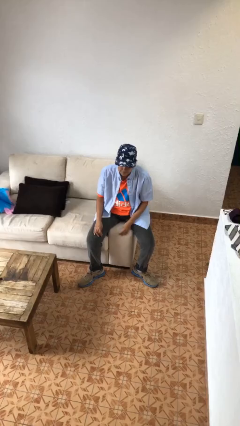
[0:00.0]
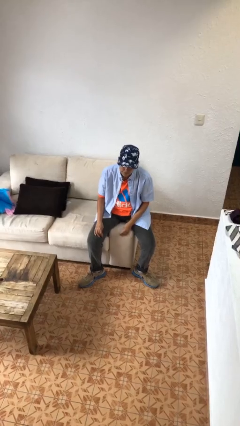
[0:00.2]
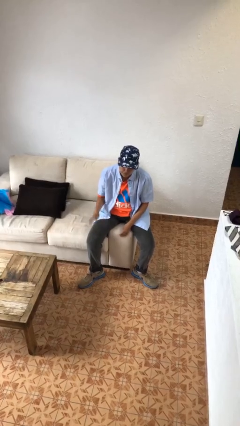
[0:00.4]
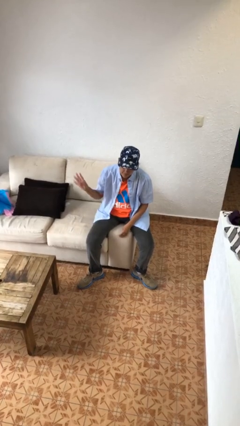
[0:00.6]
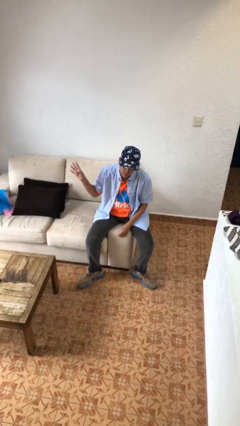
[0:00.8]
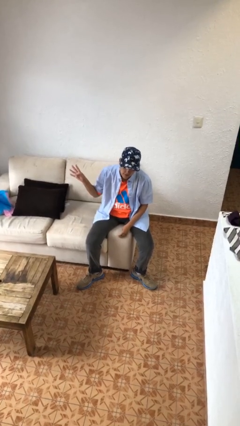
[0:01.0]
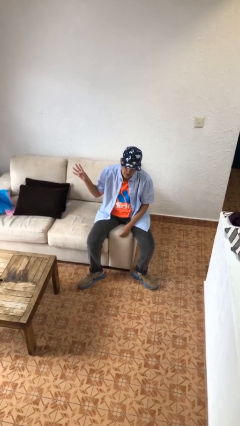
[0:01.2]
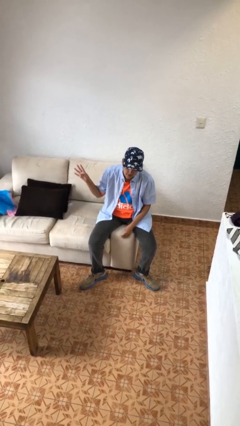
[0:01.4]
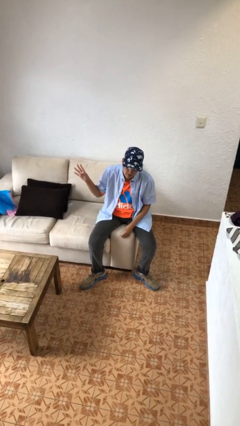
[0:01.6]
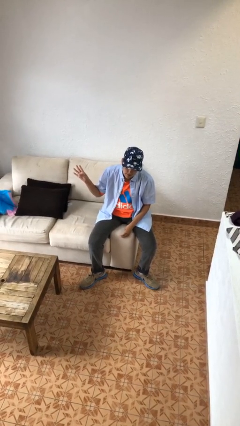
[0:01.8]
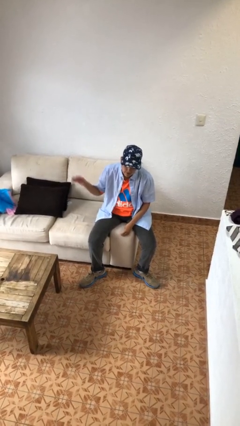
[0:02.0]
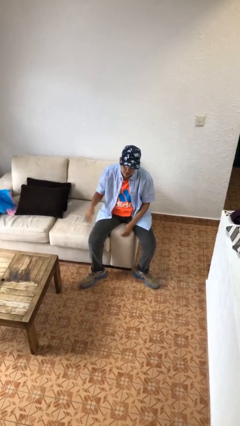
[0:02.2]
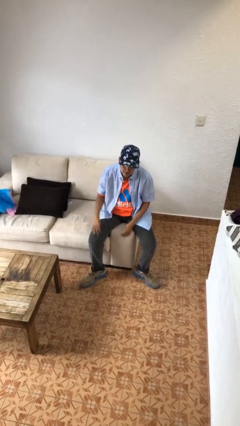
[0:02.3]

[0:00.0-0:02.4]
person gestures number four

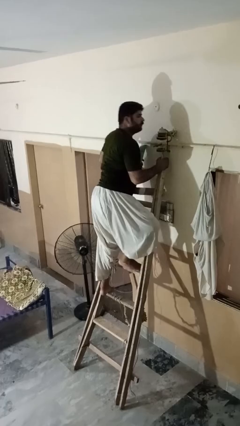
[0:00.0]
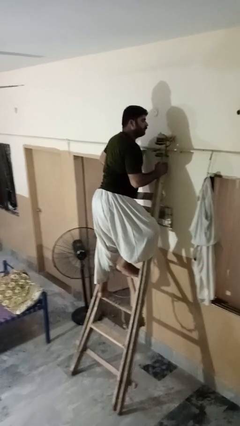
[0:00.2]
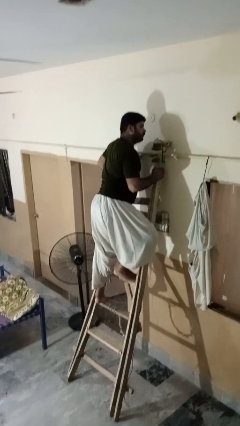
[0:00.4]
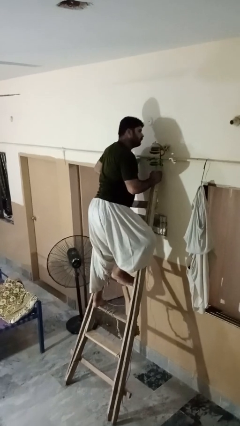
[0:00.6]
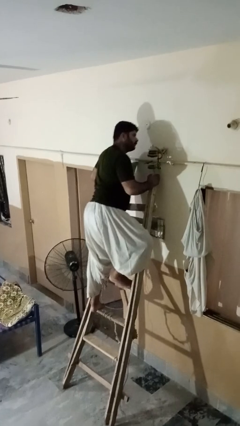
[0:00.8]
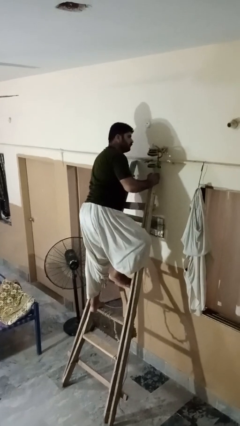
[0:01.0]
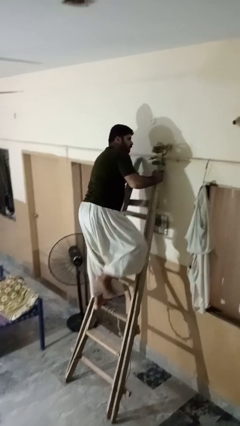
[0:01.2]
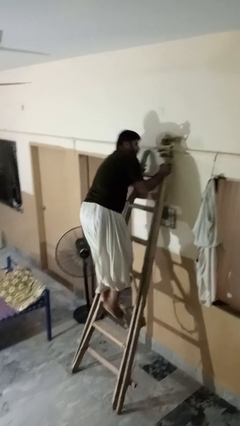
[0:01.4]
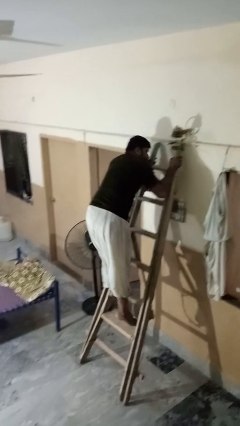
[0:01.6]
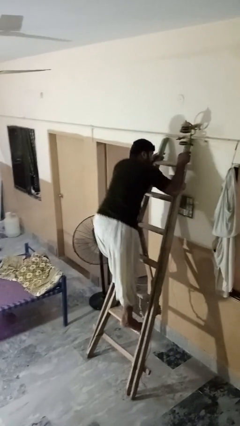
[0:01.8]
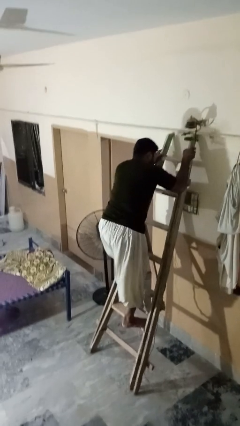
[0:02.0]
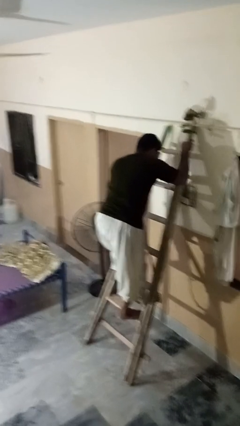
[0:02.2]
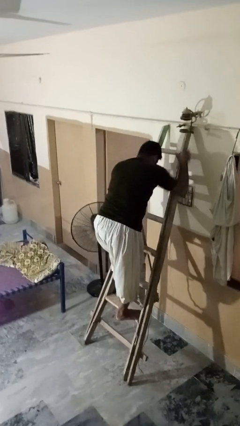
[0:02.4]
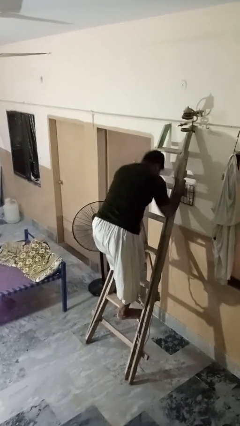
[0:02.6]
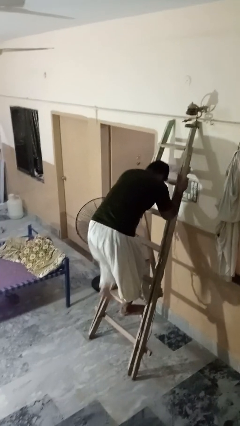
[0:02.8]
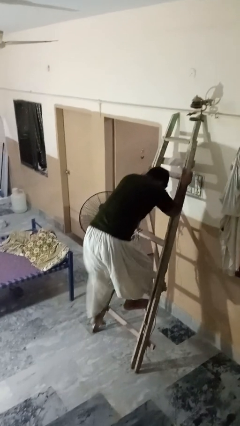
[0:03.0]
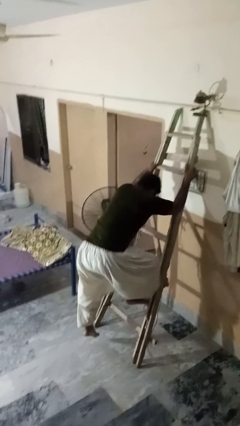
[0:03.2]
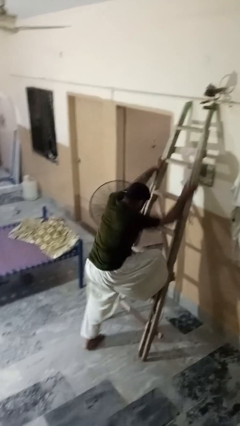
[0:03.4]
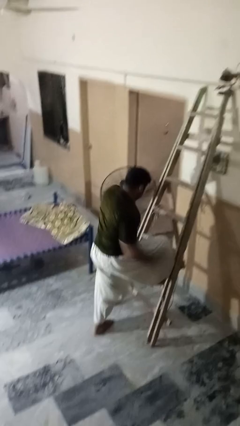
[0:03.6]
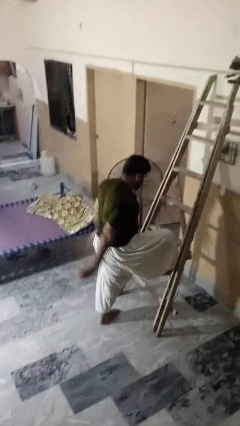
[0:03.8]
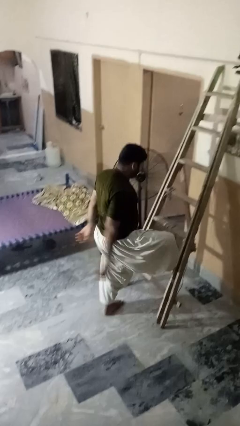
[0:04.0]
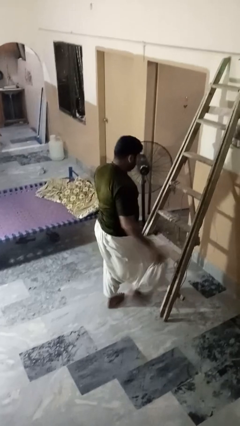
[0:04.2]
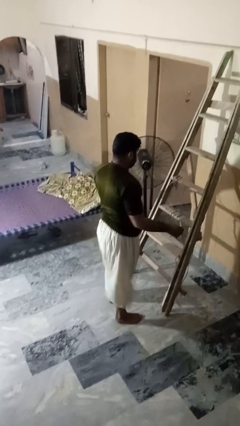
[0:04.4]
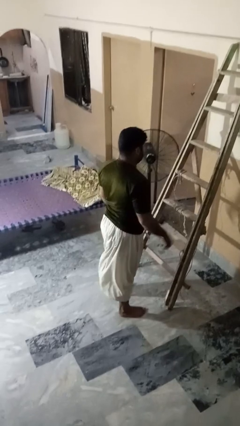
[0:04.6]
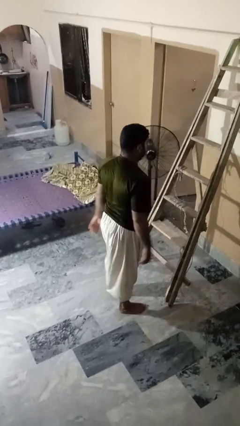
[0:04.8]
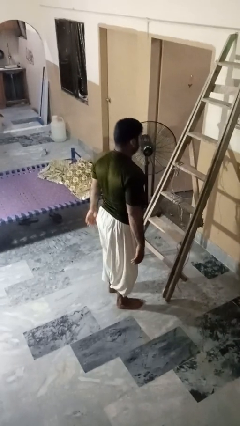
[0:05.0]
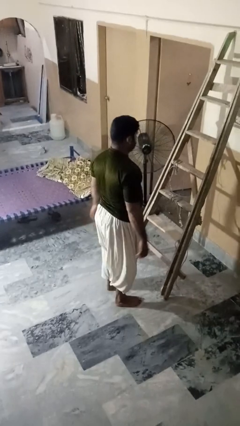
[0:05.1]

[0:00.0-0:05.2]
person climbs down ladder

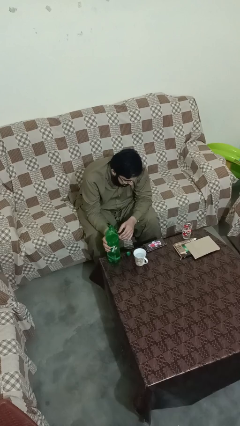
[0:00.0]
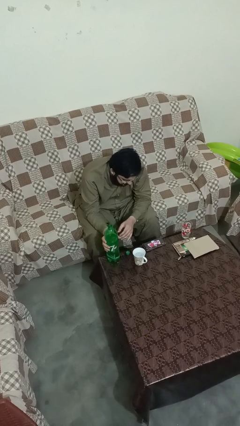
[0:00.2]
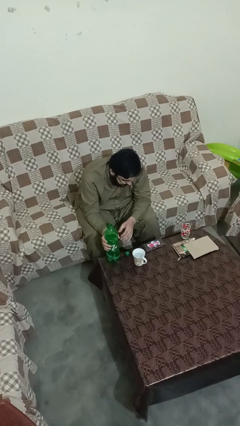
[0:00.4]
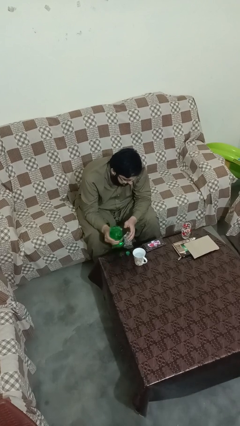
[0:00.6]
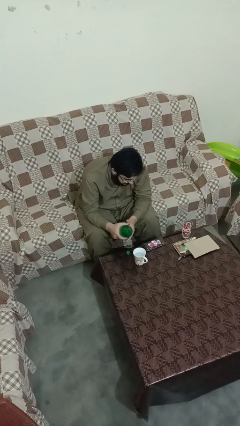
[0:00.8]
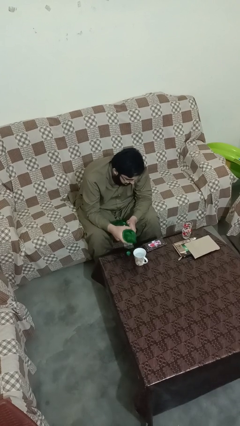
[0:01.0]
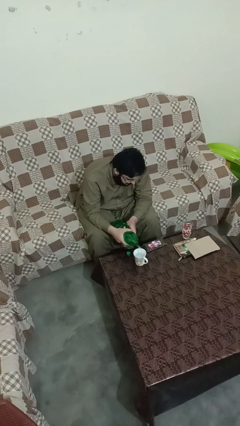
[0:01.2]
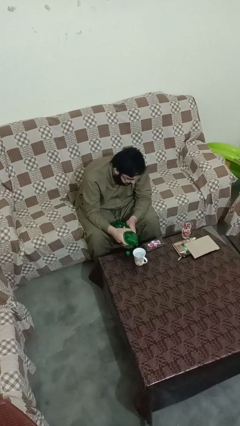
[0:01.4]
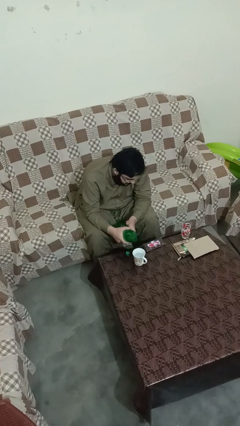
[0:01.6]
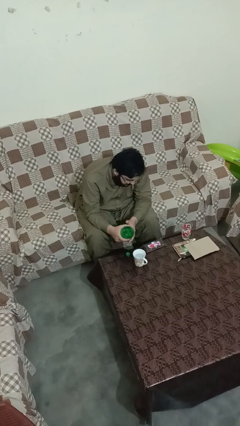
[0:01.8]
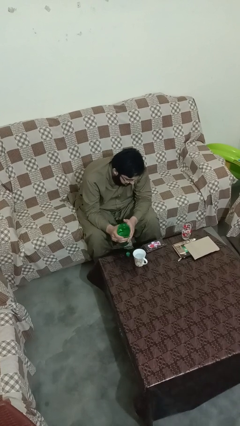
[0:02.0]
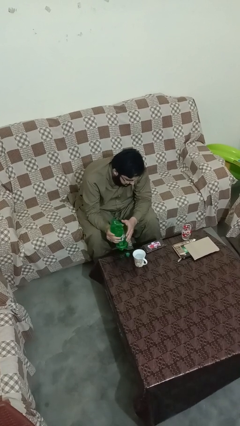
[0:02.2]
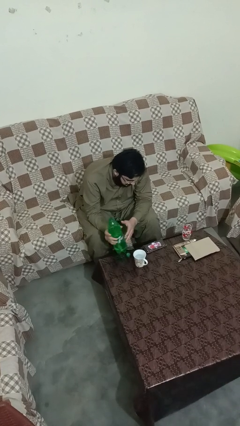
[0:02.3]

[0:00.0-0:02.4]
person pours liquid into cup

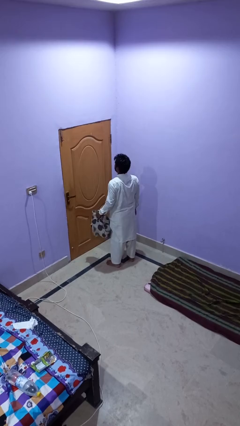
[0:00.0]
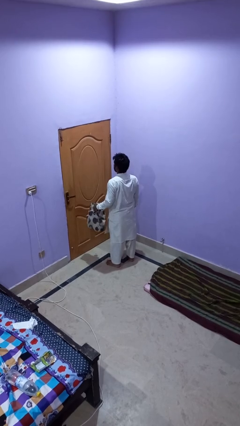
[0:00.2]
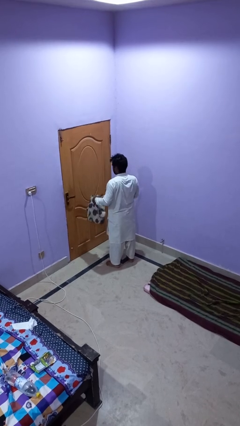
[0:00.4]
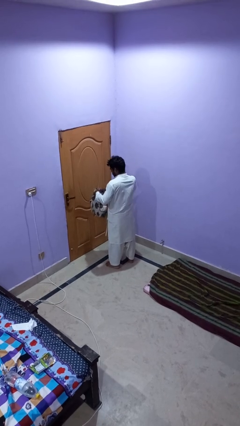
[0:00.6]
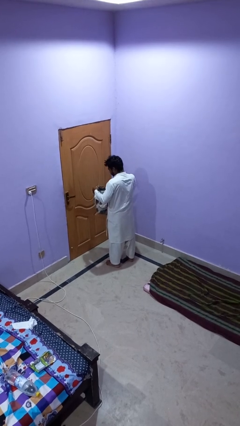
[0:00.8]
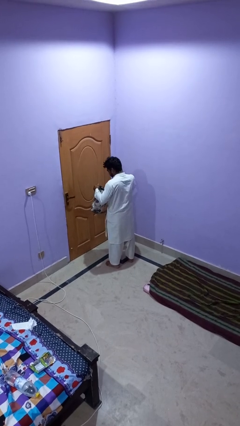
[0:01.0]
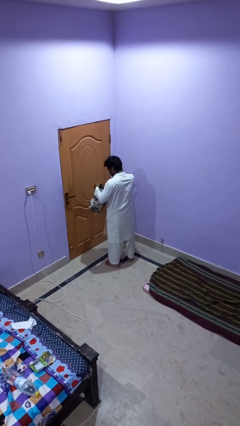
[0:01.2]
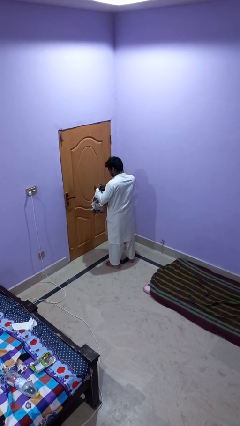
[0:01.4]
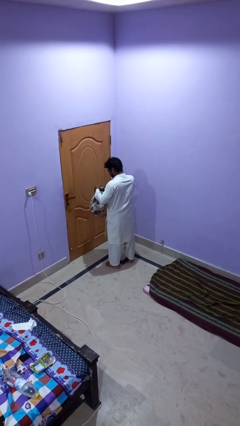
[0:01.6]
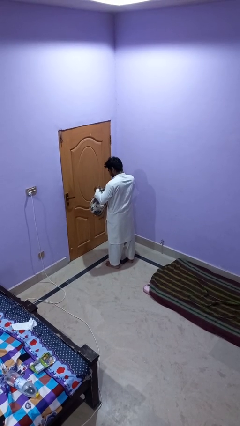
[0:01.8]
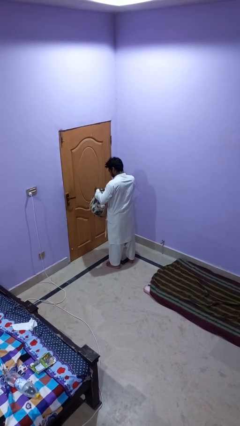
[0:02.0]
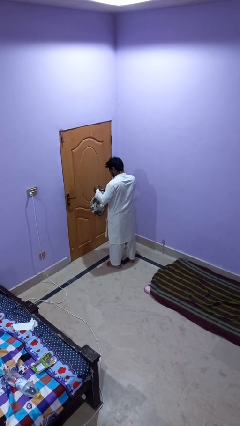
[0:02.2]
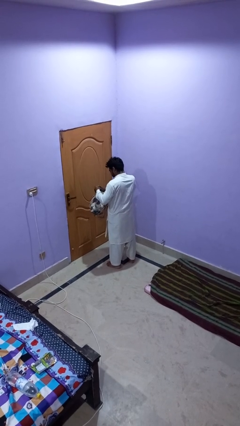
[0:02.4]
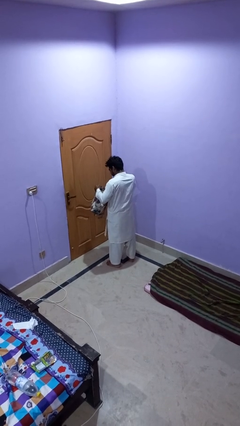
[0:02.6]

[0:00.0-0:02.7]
person searches in backpack

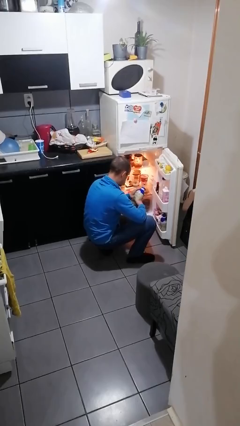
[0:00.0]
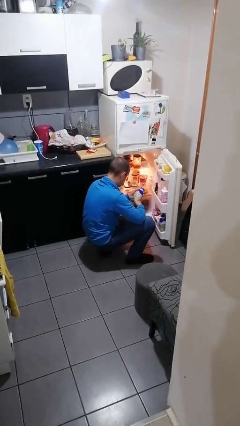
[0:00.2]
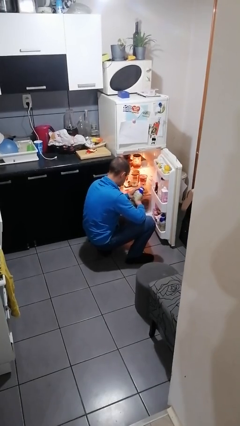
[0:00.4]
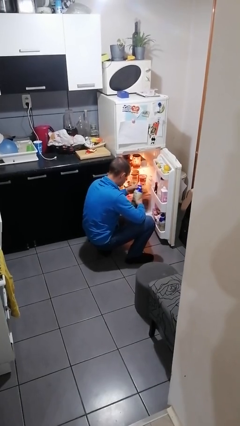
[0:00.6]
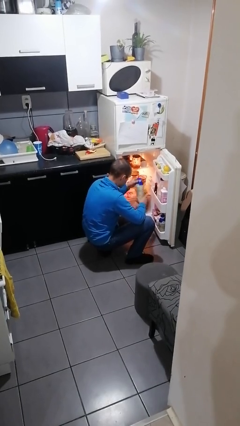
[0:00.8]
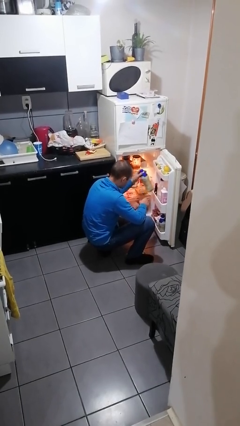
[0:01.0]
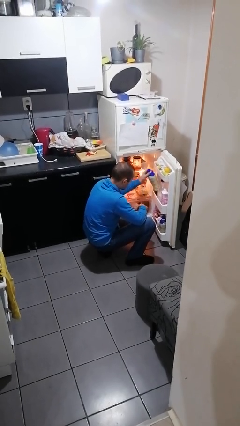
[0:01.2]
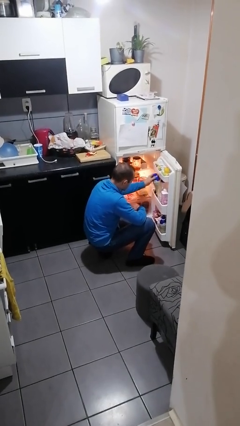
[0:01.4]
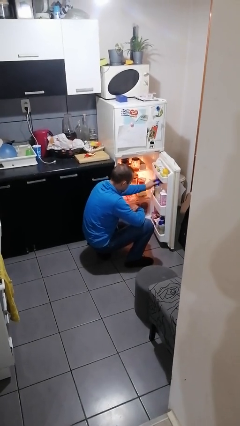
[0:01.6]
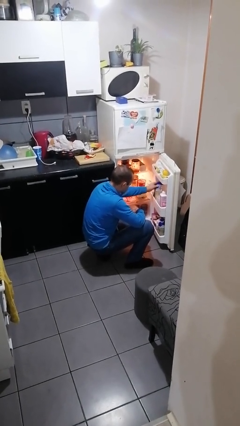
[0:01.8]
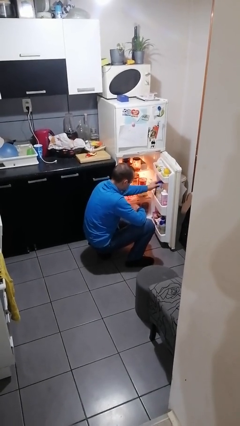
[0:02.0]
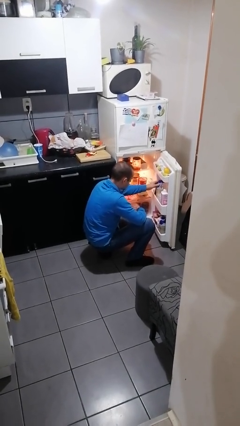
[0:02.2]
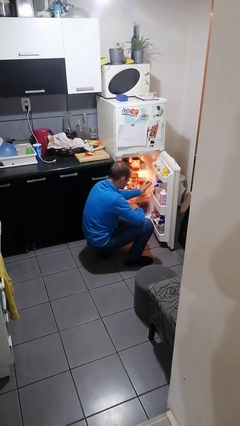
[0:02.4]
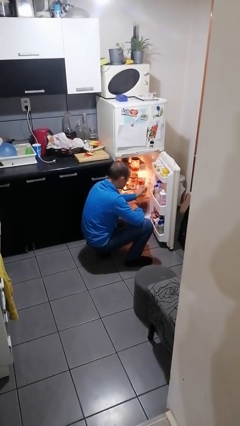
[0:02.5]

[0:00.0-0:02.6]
person puts object into refrigerator

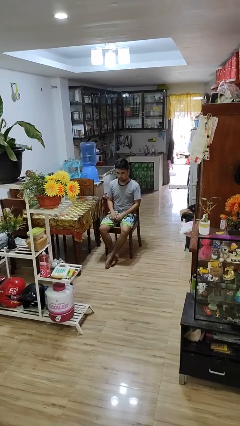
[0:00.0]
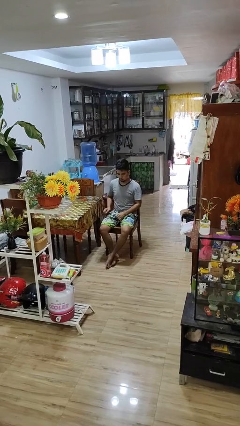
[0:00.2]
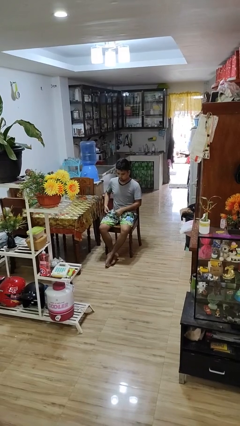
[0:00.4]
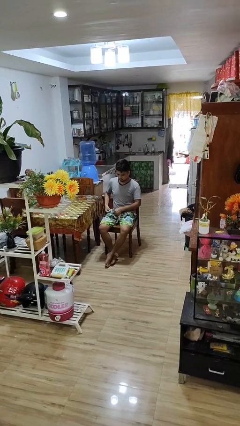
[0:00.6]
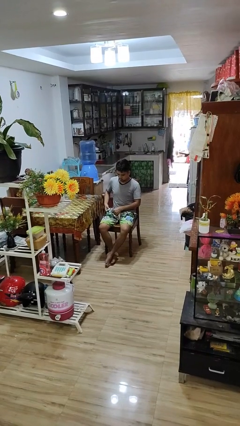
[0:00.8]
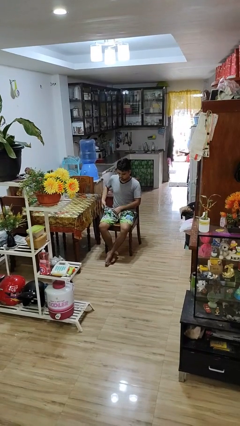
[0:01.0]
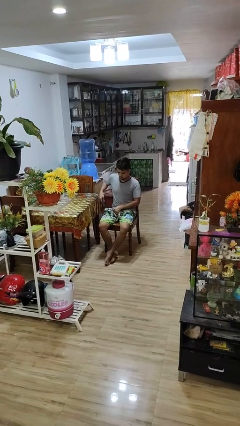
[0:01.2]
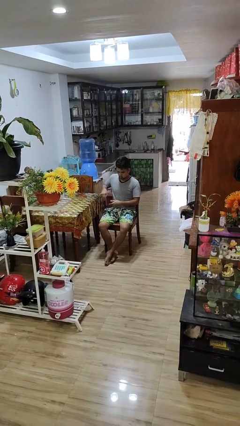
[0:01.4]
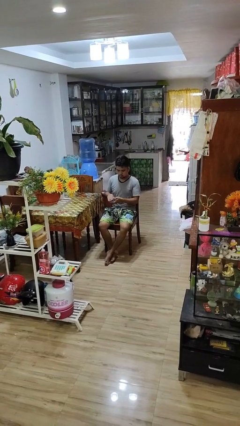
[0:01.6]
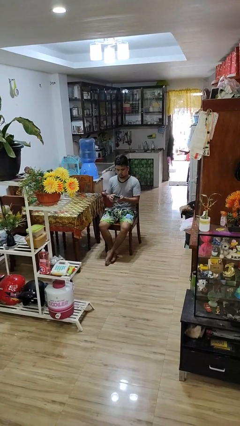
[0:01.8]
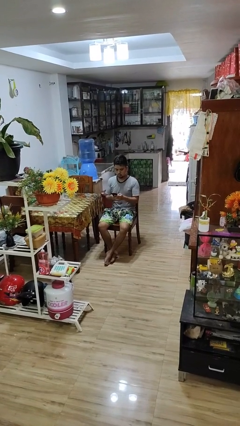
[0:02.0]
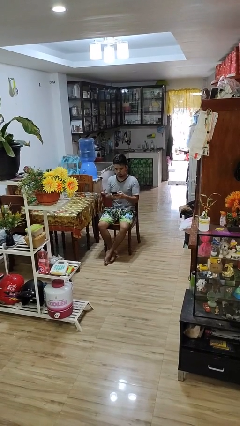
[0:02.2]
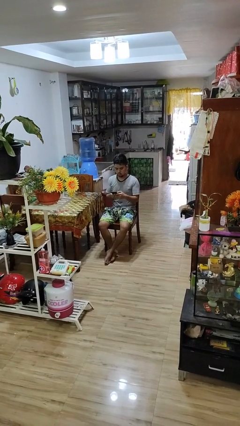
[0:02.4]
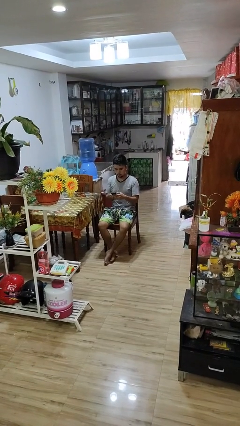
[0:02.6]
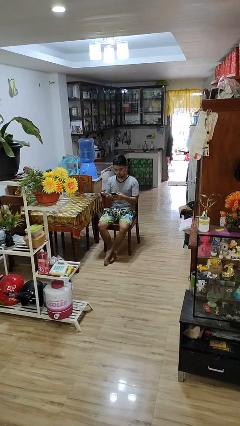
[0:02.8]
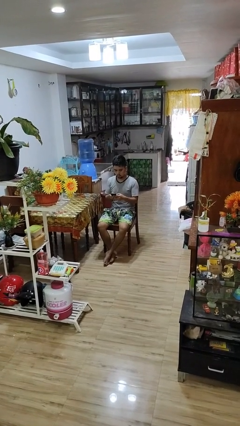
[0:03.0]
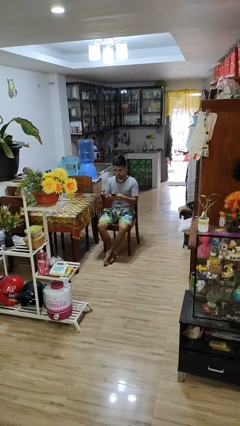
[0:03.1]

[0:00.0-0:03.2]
person takes phone from pocket
